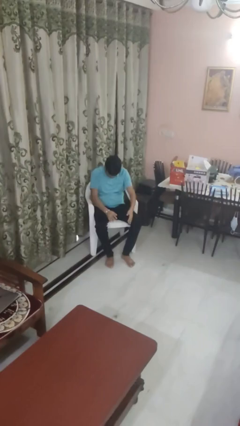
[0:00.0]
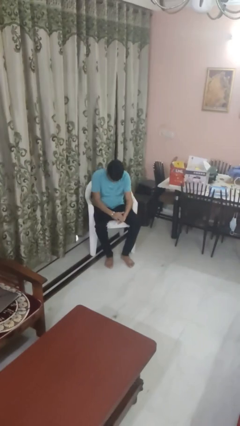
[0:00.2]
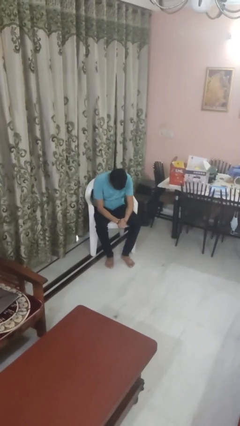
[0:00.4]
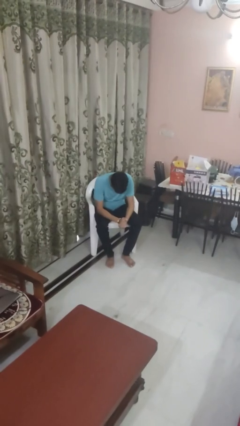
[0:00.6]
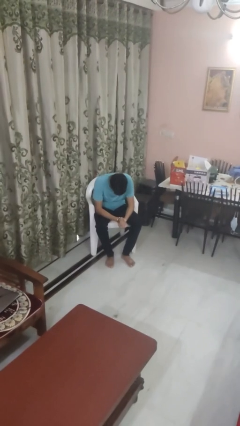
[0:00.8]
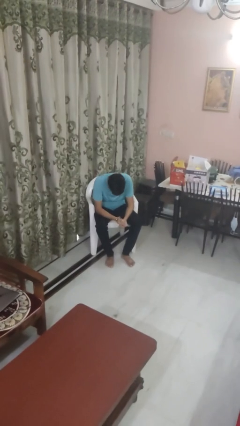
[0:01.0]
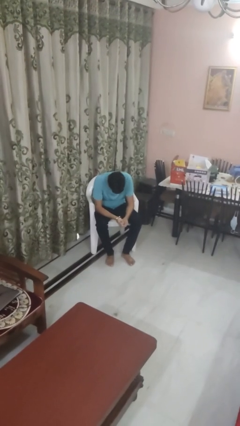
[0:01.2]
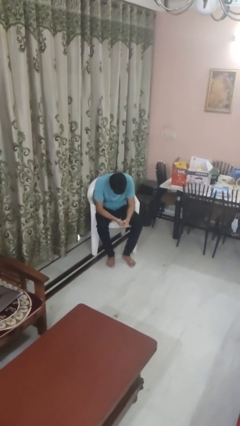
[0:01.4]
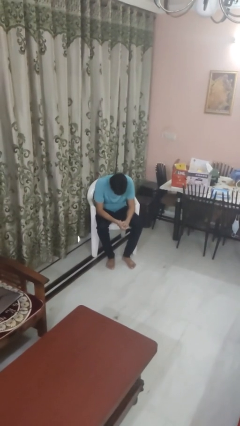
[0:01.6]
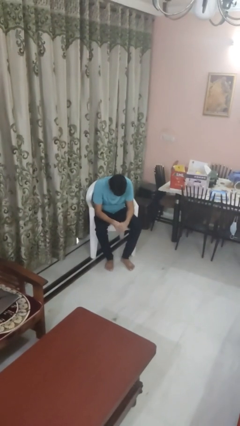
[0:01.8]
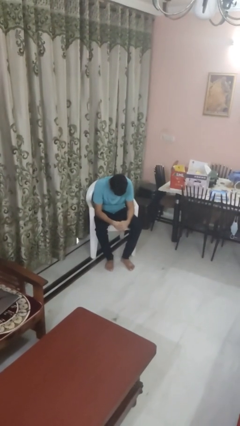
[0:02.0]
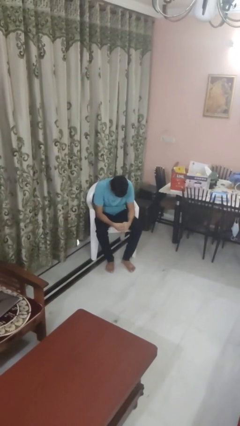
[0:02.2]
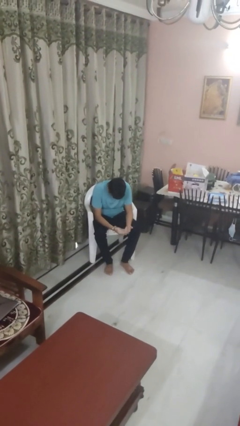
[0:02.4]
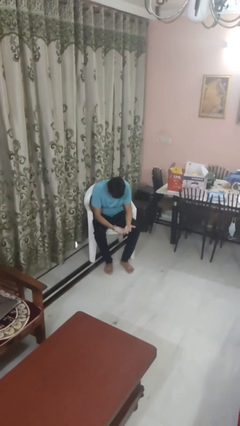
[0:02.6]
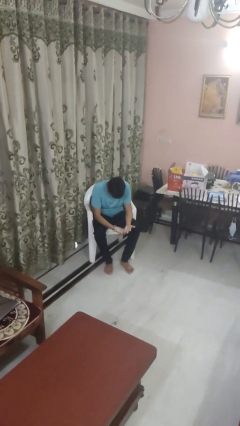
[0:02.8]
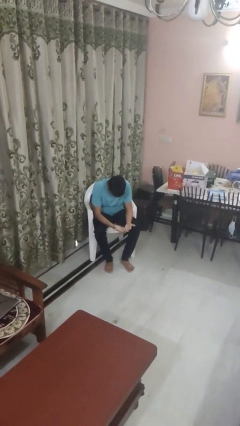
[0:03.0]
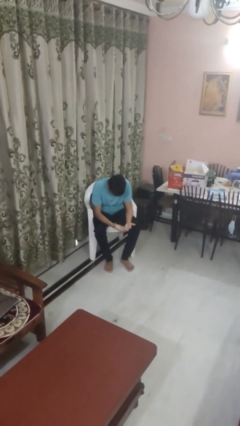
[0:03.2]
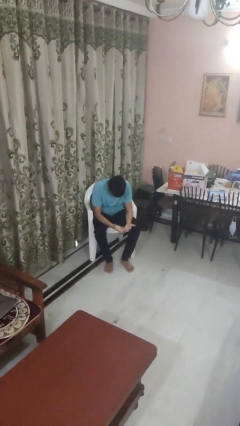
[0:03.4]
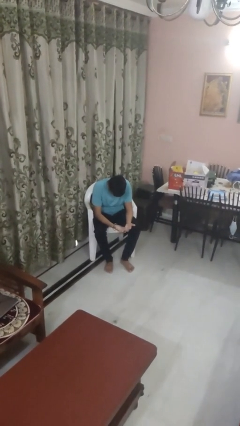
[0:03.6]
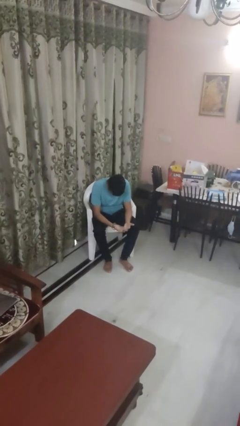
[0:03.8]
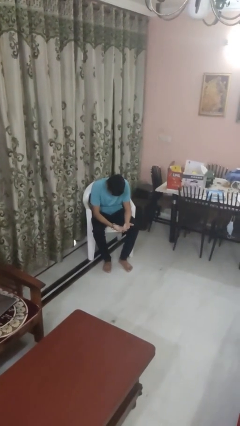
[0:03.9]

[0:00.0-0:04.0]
person looks at hands in lap

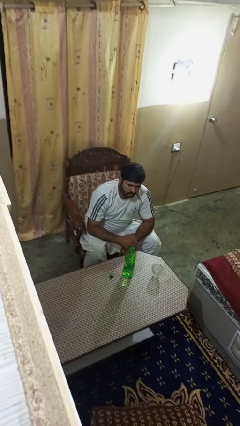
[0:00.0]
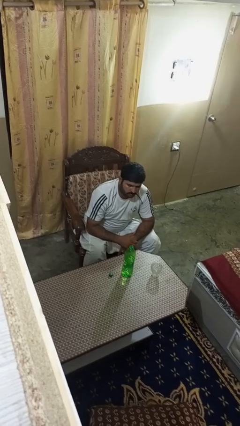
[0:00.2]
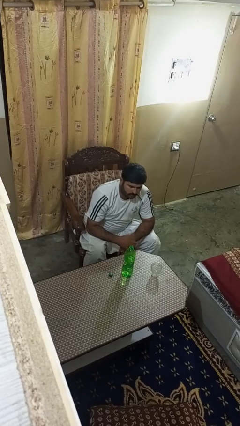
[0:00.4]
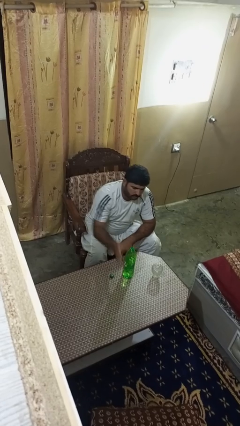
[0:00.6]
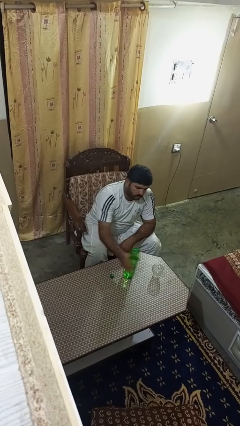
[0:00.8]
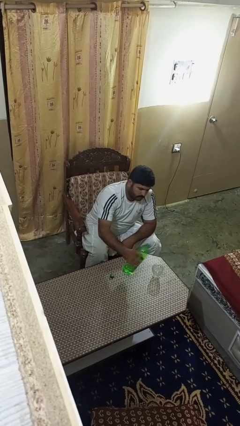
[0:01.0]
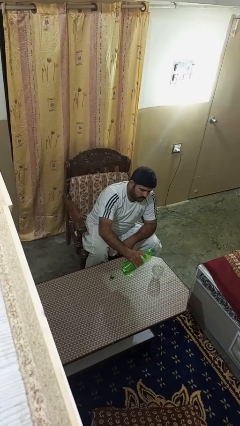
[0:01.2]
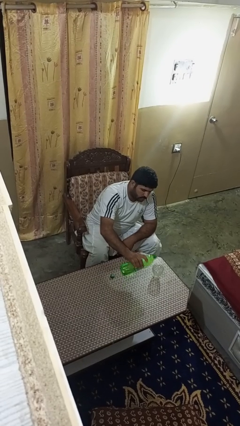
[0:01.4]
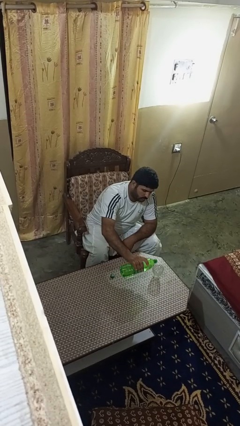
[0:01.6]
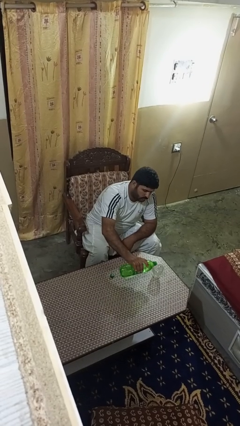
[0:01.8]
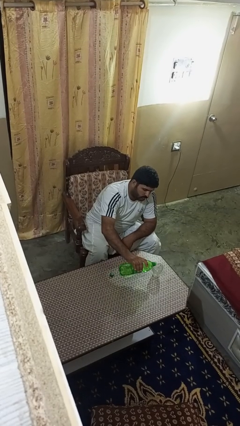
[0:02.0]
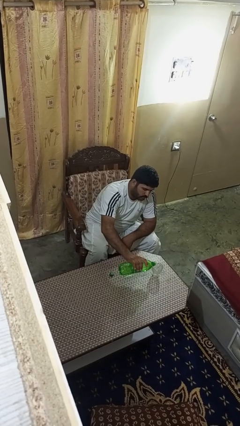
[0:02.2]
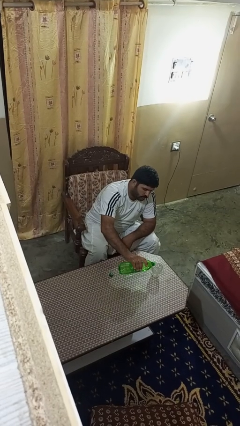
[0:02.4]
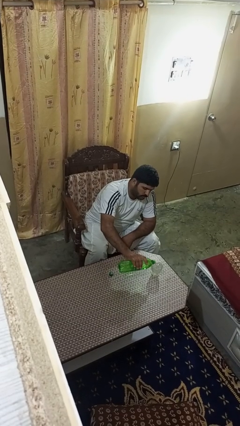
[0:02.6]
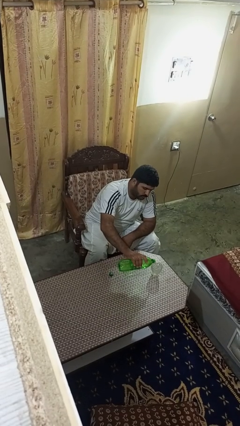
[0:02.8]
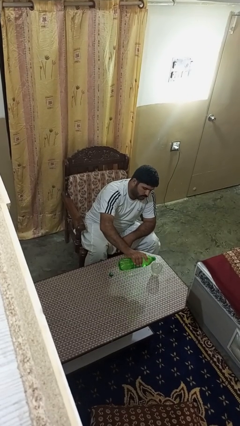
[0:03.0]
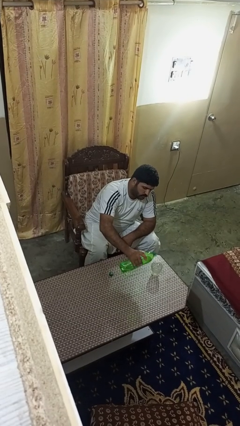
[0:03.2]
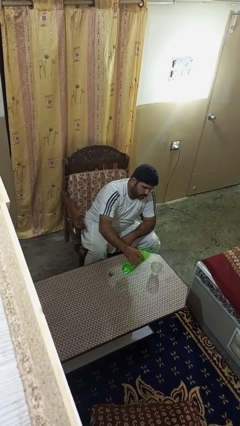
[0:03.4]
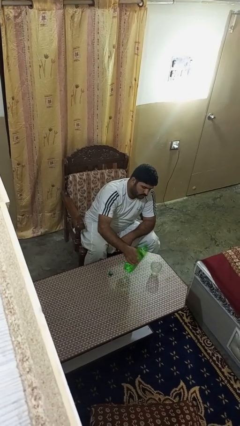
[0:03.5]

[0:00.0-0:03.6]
person pours liquid into cup

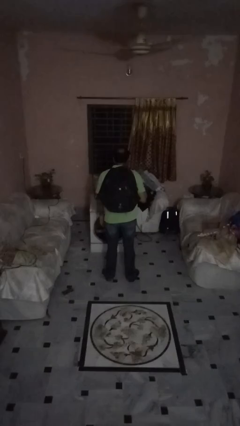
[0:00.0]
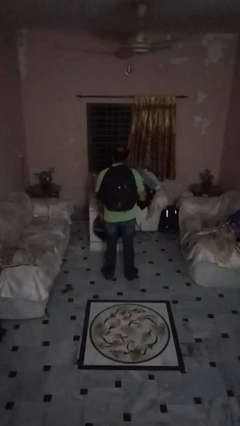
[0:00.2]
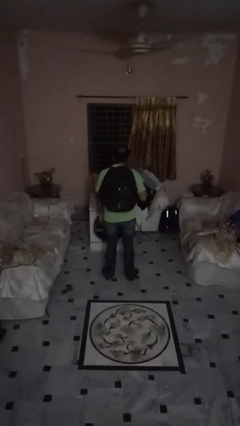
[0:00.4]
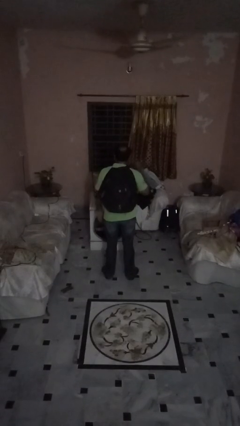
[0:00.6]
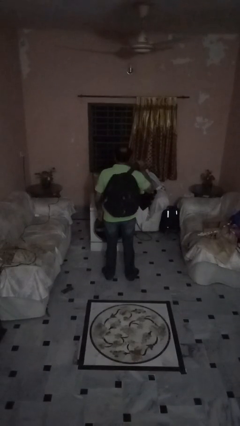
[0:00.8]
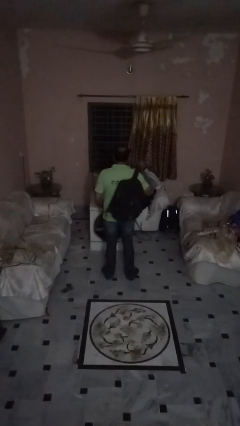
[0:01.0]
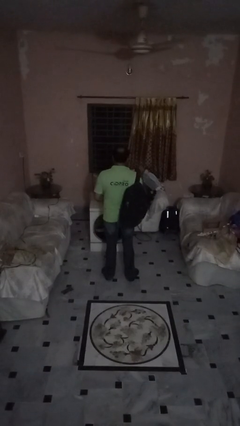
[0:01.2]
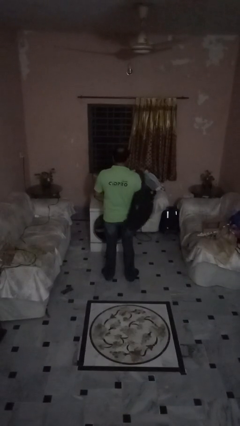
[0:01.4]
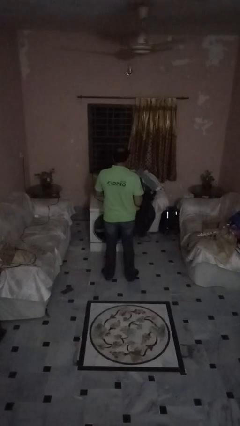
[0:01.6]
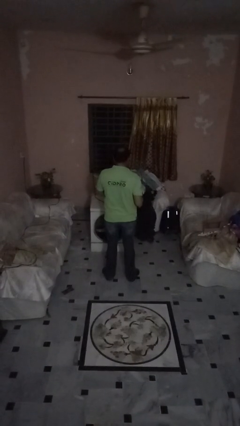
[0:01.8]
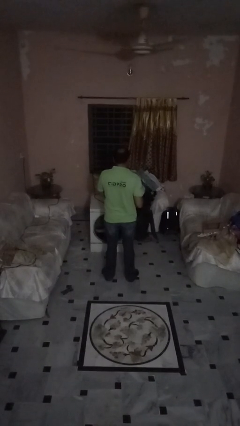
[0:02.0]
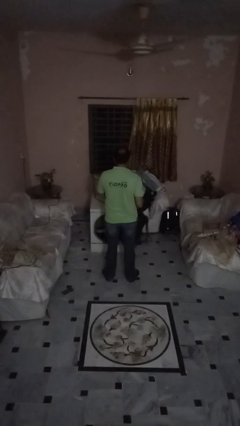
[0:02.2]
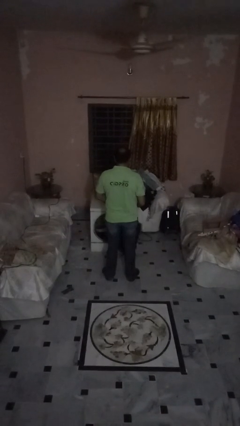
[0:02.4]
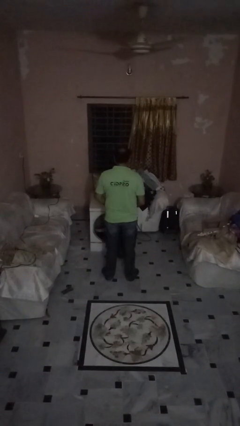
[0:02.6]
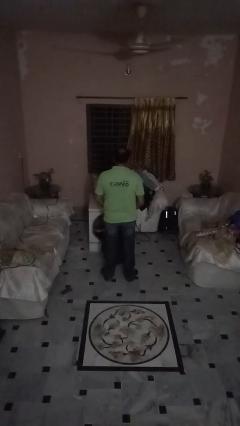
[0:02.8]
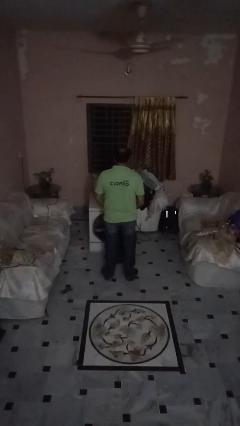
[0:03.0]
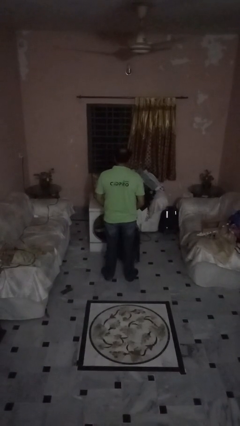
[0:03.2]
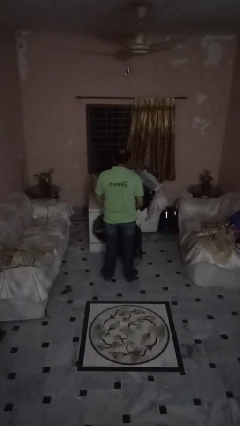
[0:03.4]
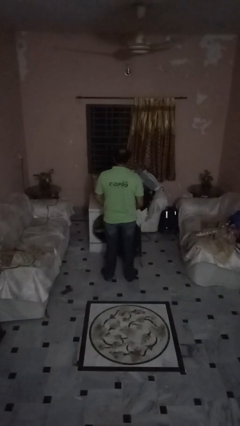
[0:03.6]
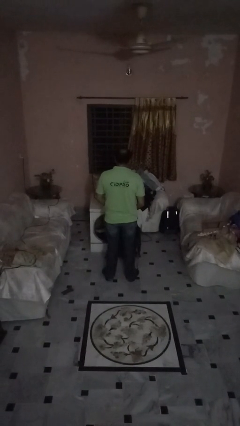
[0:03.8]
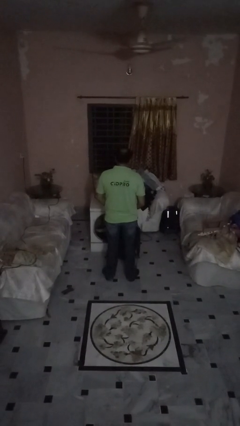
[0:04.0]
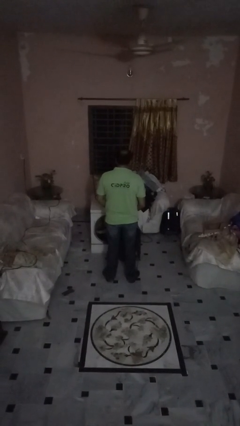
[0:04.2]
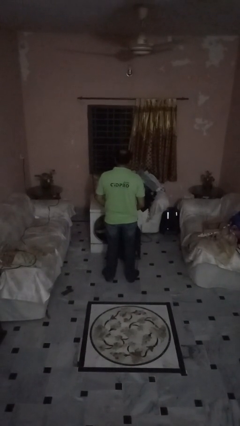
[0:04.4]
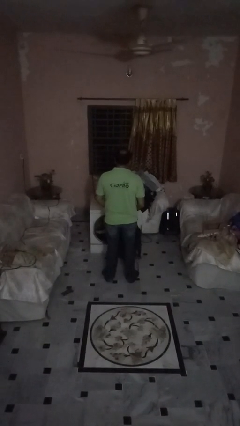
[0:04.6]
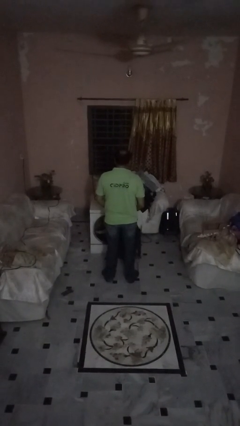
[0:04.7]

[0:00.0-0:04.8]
person takes off backpack

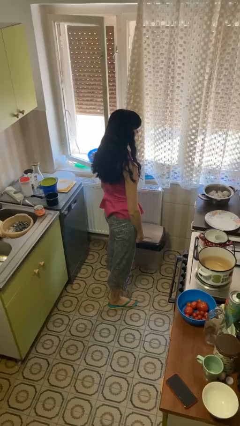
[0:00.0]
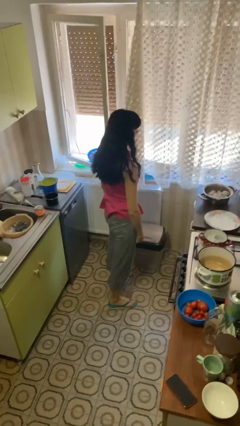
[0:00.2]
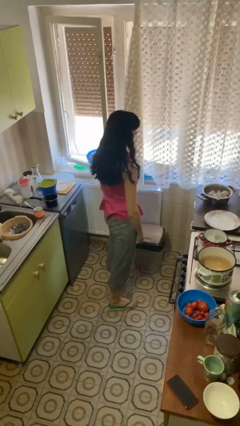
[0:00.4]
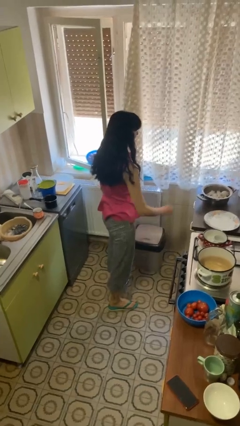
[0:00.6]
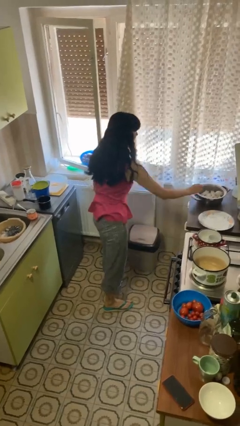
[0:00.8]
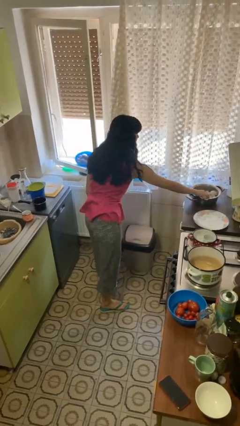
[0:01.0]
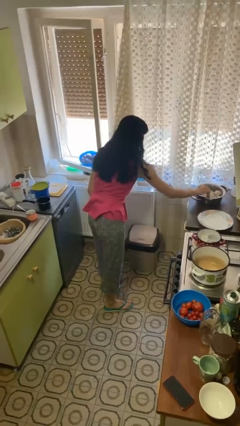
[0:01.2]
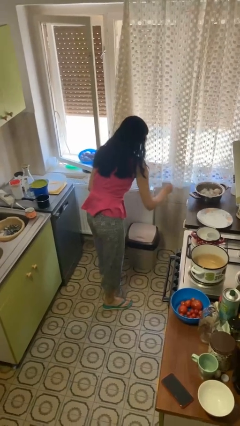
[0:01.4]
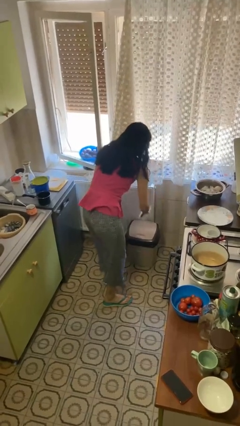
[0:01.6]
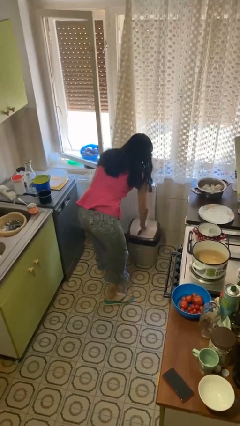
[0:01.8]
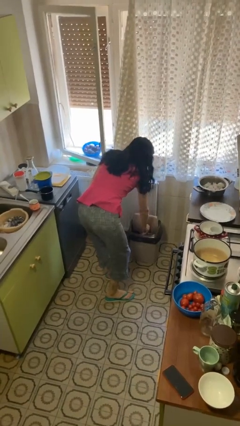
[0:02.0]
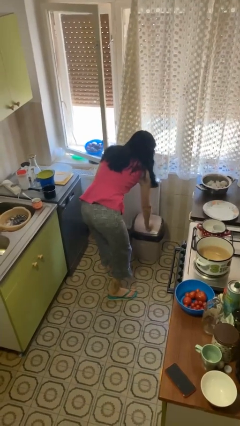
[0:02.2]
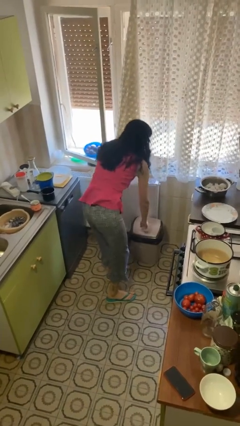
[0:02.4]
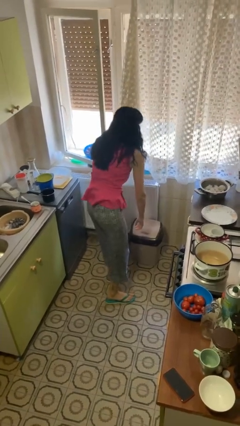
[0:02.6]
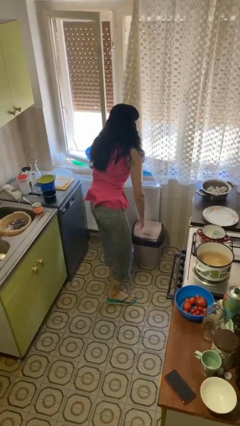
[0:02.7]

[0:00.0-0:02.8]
person discards trash

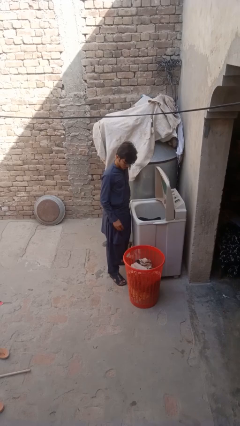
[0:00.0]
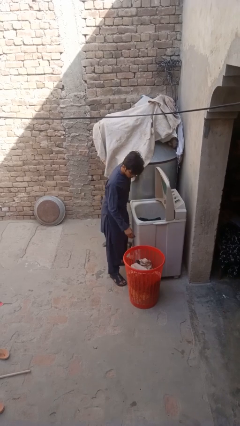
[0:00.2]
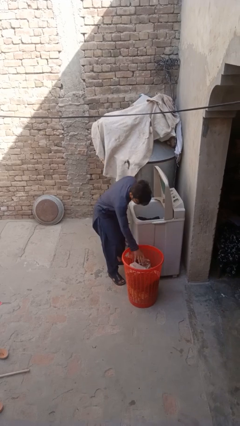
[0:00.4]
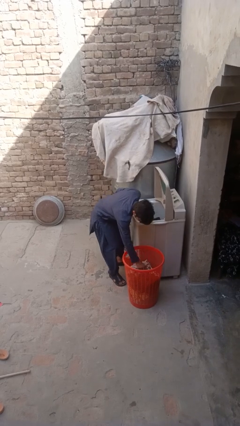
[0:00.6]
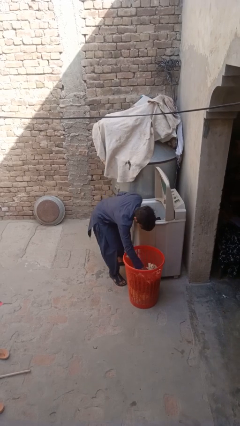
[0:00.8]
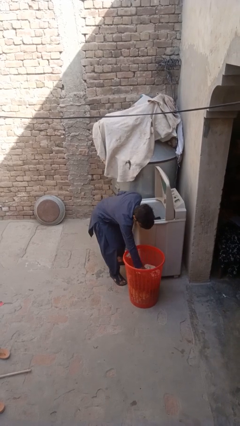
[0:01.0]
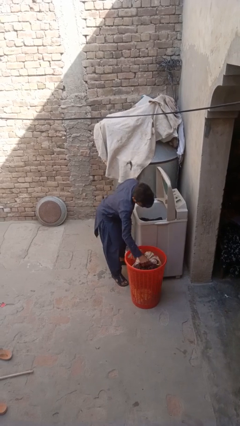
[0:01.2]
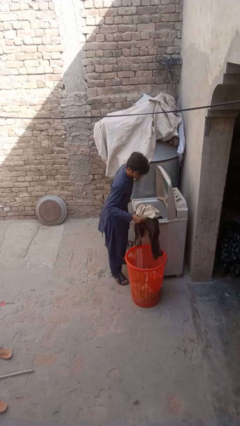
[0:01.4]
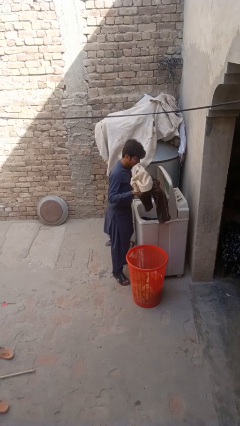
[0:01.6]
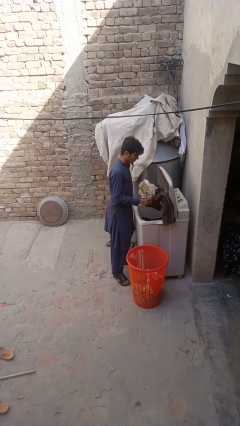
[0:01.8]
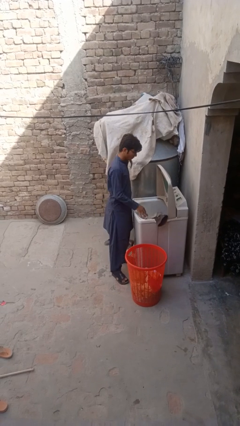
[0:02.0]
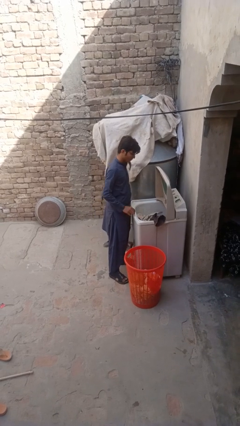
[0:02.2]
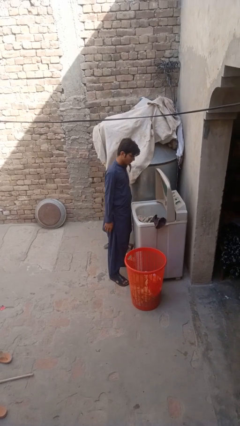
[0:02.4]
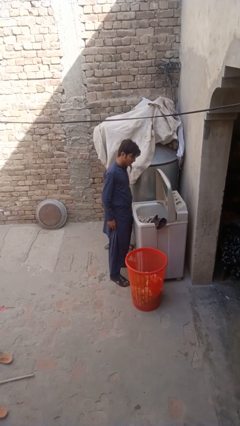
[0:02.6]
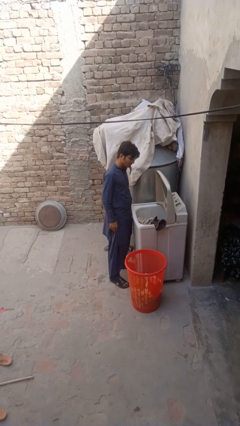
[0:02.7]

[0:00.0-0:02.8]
person loads clotheswasher
